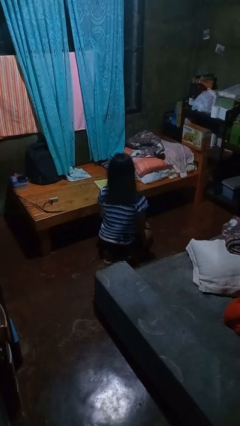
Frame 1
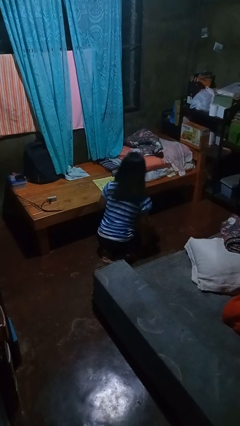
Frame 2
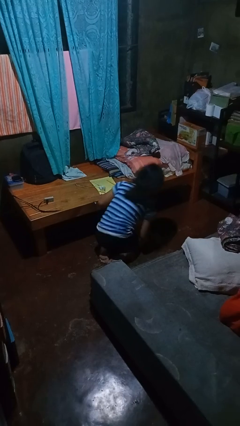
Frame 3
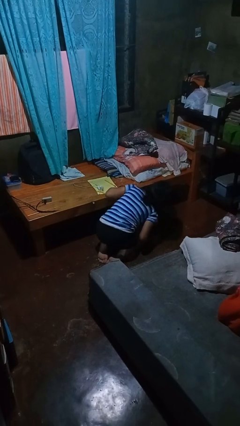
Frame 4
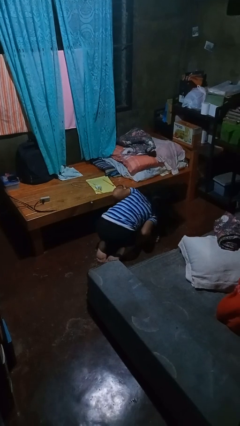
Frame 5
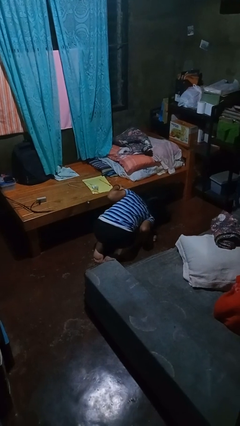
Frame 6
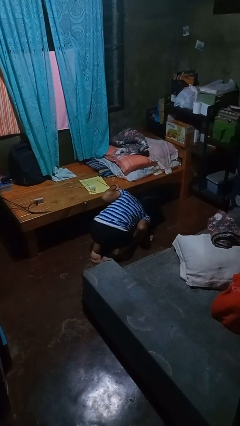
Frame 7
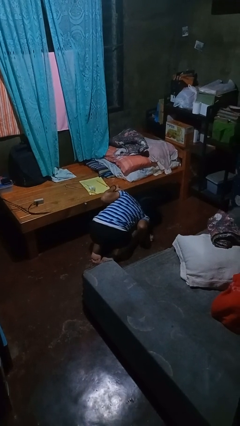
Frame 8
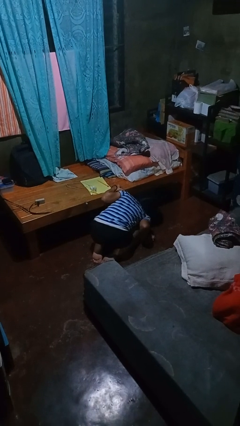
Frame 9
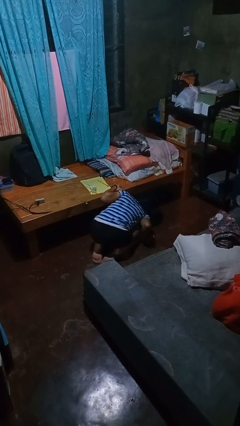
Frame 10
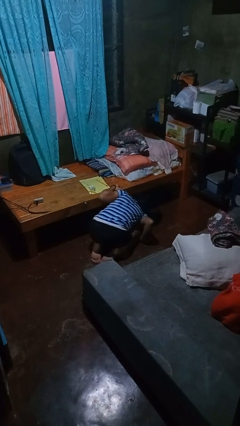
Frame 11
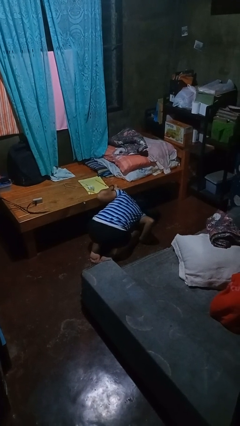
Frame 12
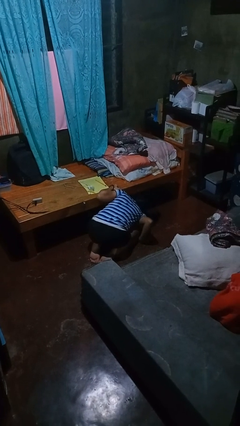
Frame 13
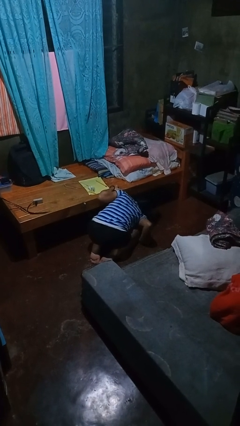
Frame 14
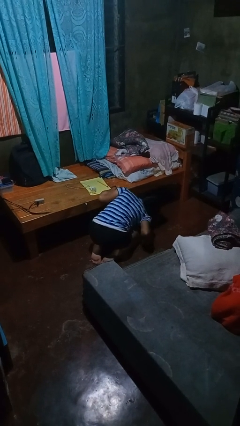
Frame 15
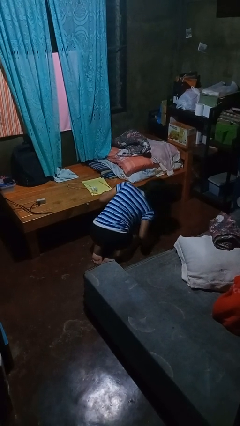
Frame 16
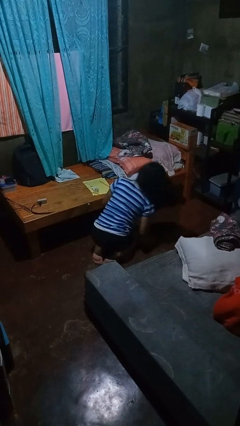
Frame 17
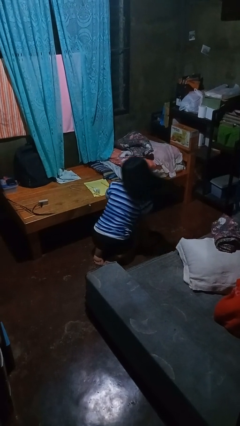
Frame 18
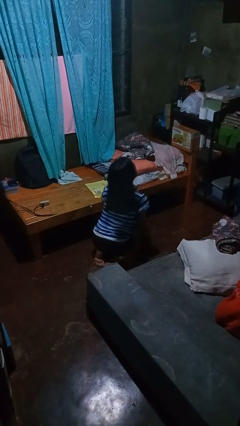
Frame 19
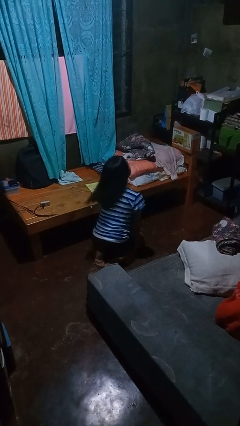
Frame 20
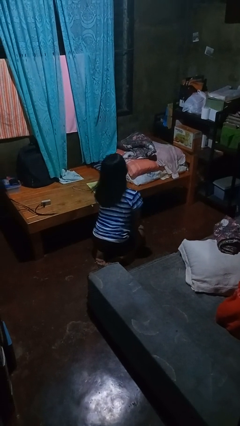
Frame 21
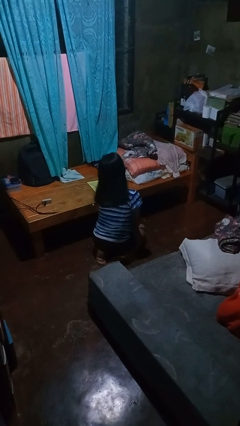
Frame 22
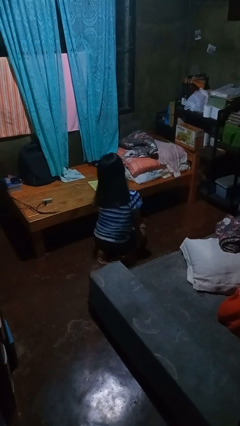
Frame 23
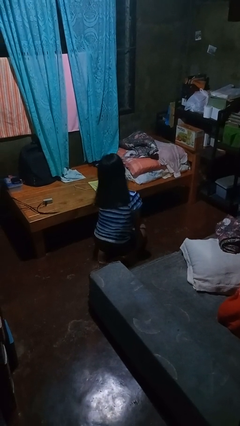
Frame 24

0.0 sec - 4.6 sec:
person searches under bed

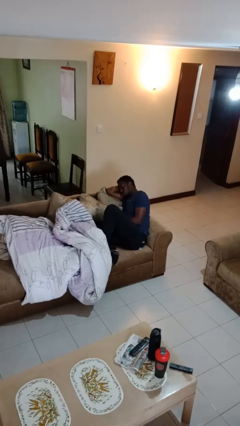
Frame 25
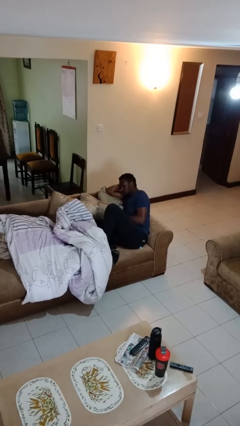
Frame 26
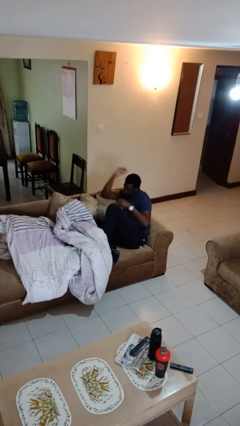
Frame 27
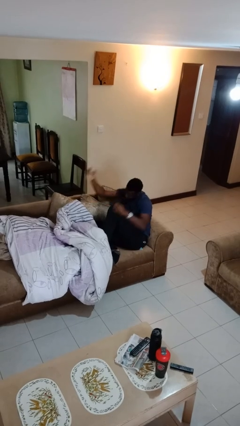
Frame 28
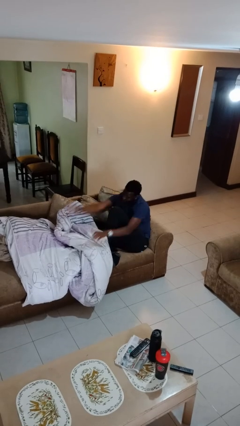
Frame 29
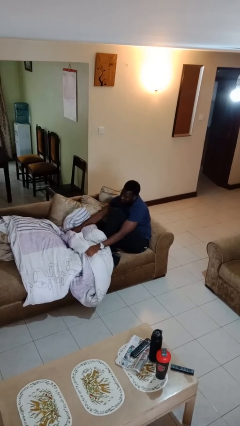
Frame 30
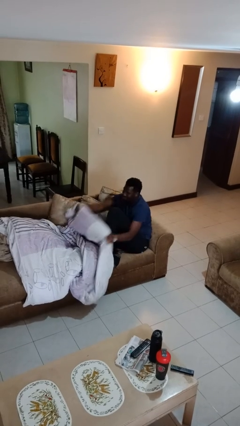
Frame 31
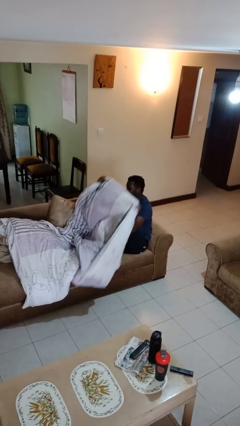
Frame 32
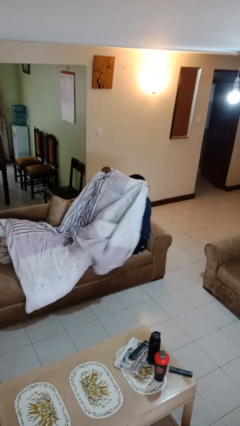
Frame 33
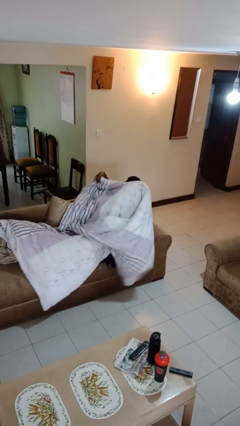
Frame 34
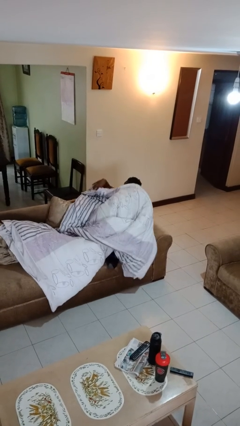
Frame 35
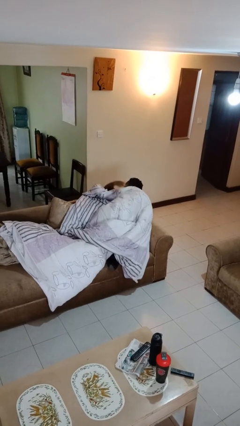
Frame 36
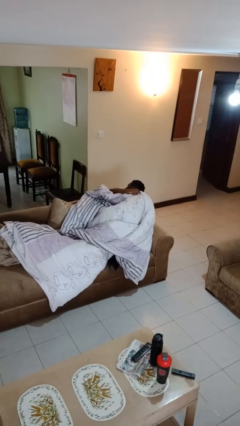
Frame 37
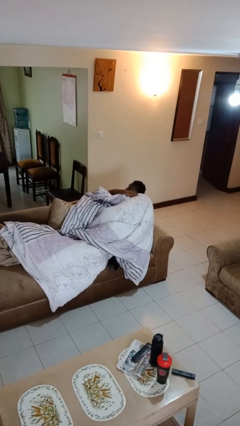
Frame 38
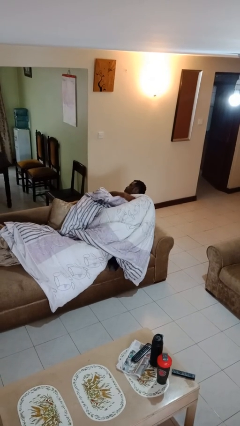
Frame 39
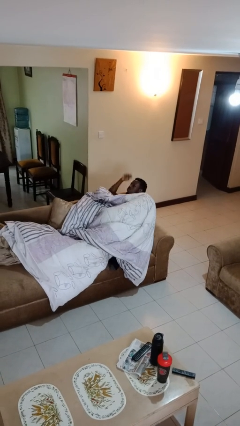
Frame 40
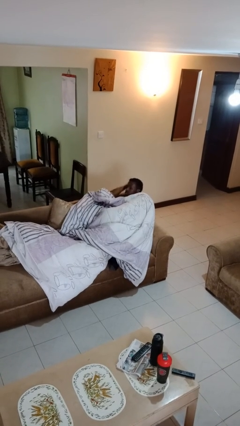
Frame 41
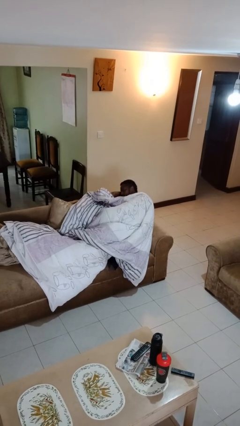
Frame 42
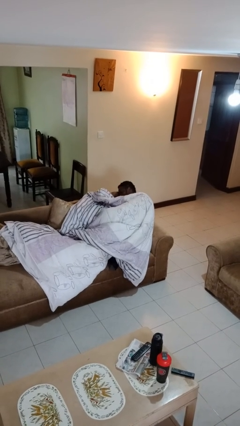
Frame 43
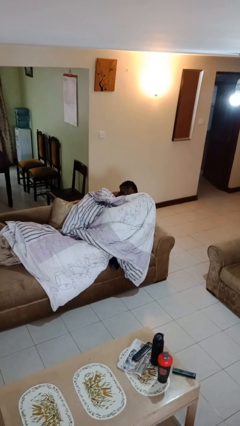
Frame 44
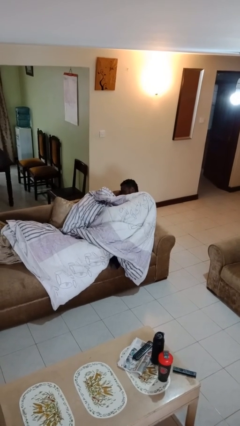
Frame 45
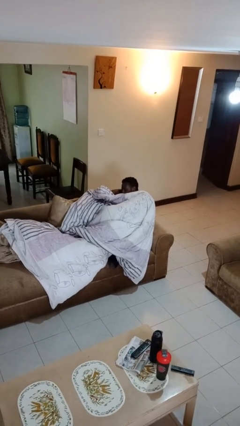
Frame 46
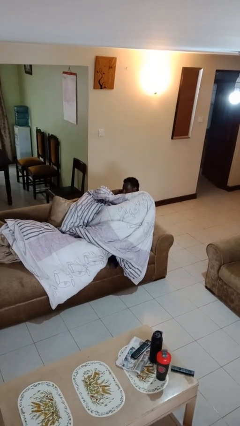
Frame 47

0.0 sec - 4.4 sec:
person covers with blanket

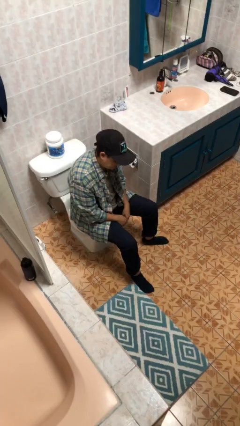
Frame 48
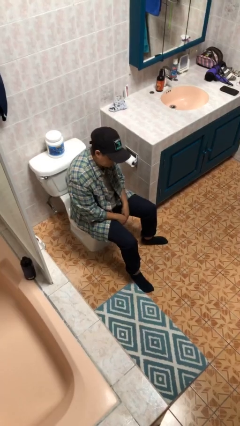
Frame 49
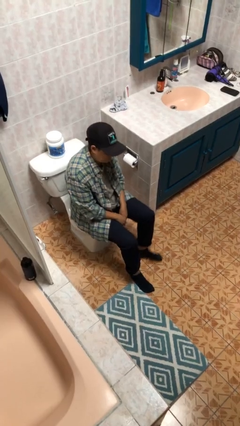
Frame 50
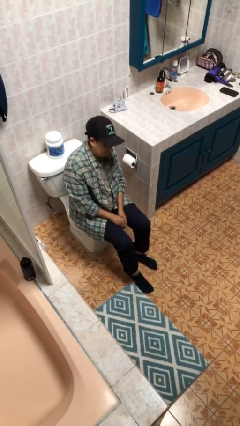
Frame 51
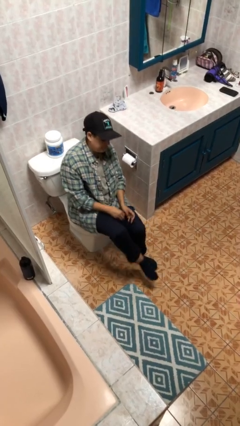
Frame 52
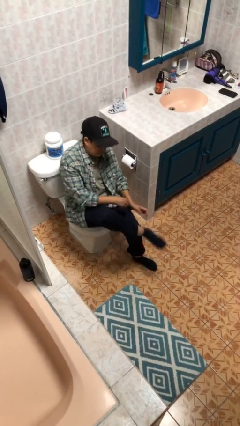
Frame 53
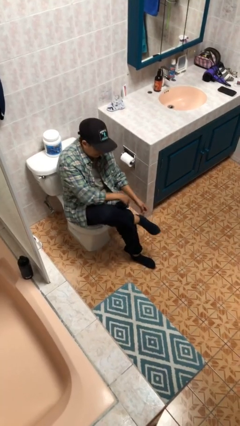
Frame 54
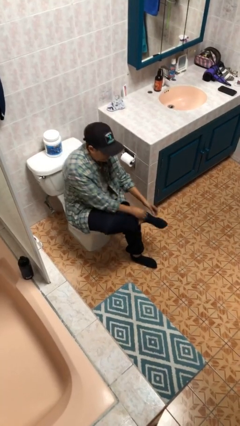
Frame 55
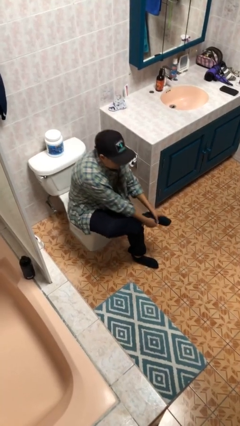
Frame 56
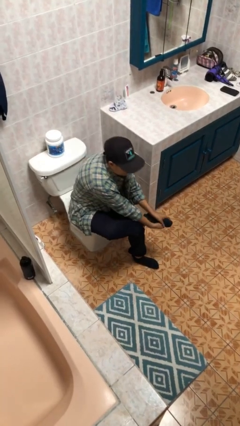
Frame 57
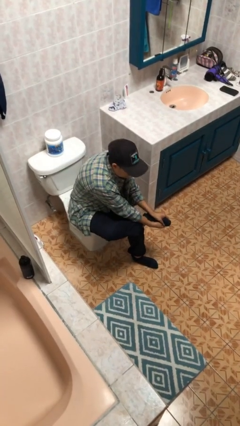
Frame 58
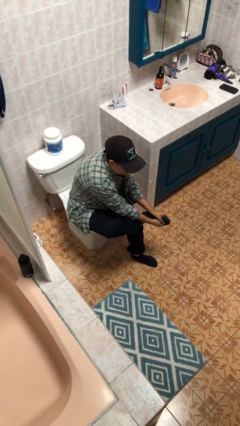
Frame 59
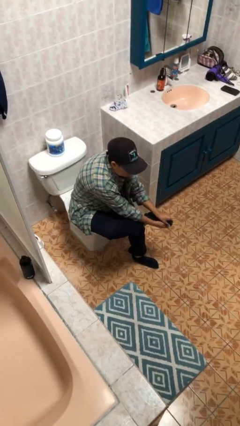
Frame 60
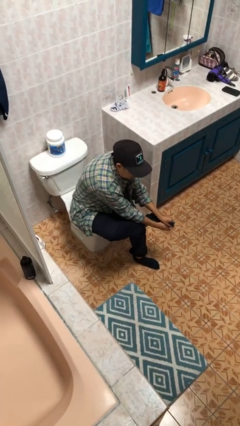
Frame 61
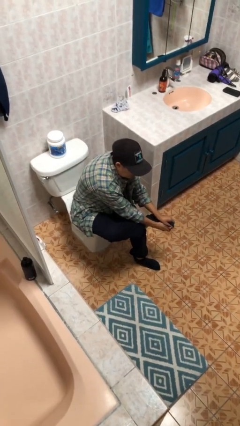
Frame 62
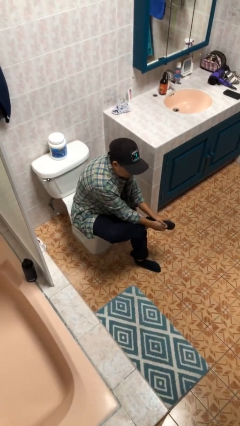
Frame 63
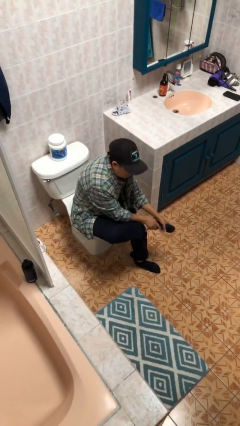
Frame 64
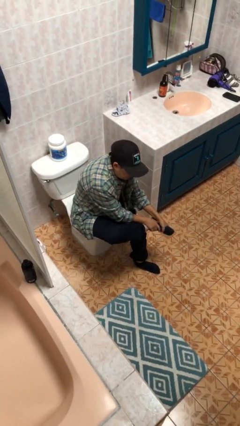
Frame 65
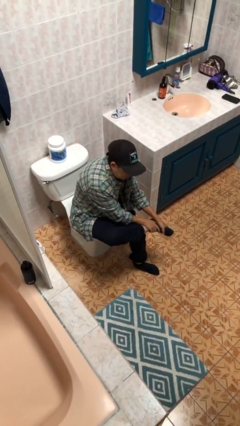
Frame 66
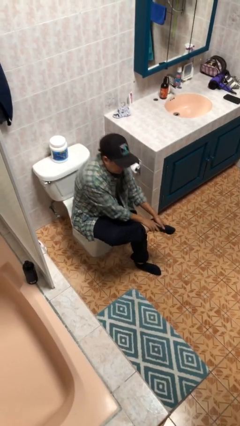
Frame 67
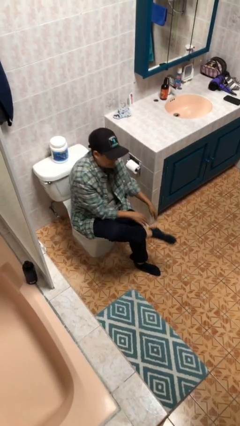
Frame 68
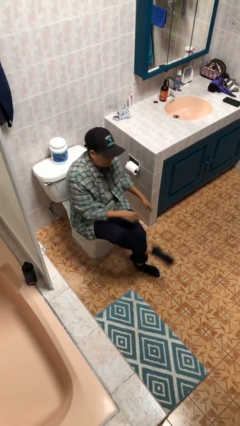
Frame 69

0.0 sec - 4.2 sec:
person rubs foot

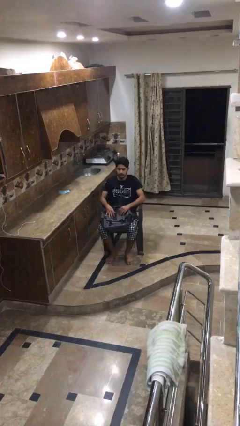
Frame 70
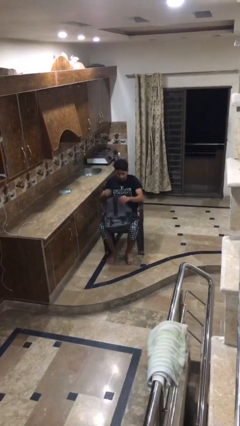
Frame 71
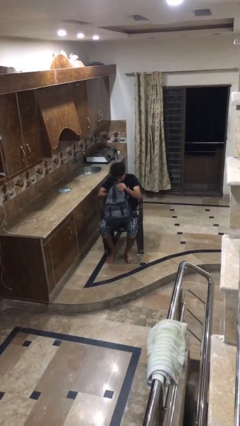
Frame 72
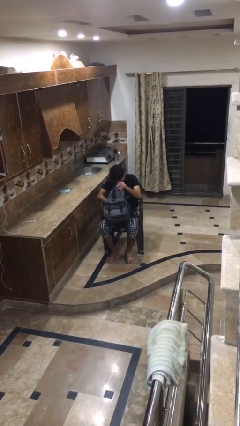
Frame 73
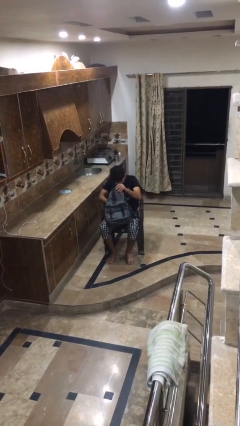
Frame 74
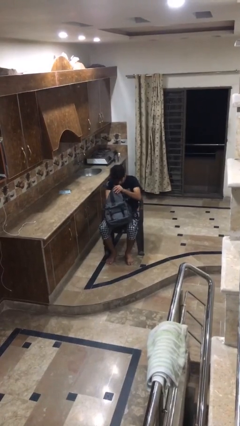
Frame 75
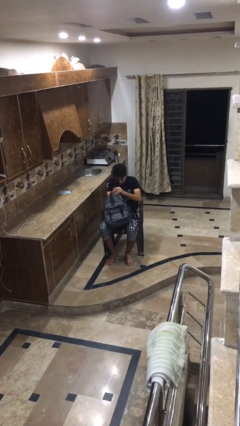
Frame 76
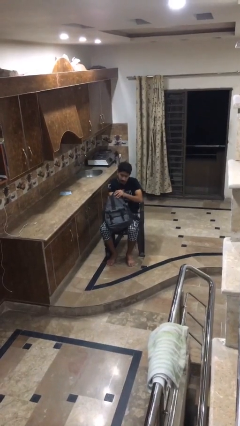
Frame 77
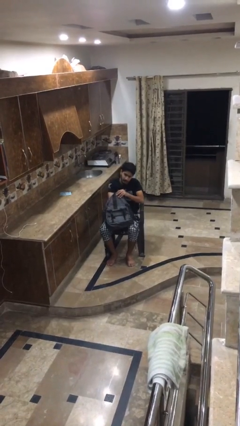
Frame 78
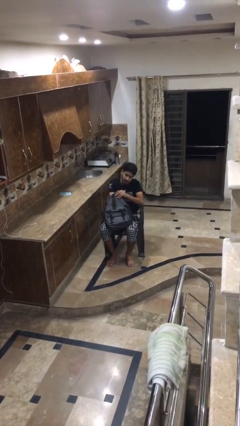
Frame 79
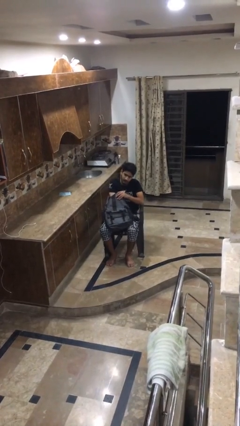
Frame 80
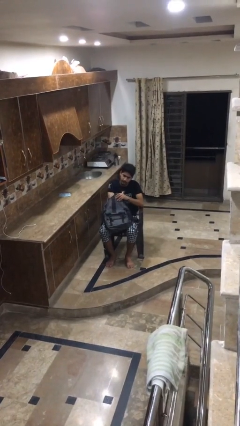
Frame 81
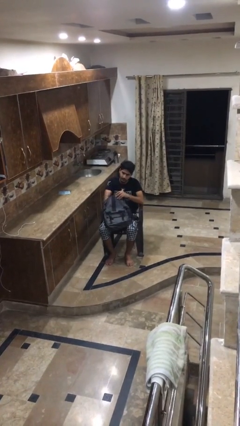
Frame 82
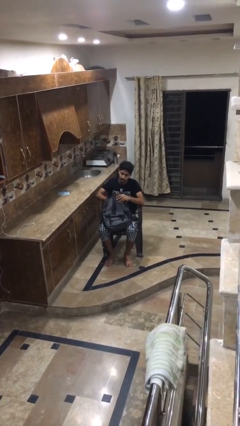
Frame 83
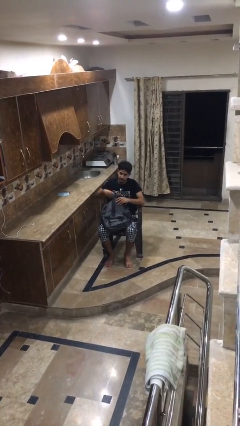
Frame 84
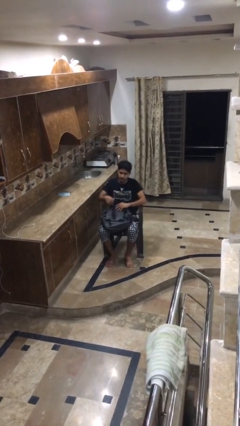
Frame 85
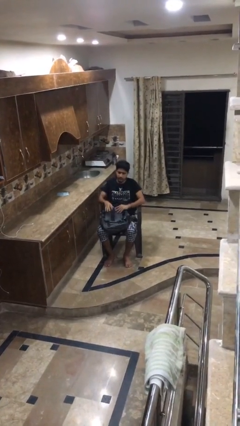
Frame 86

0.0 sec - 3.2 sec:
person searches in bag

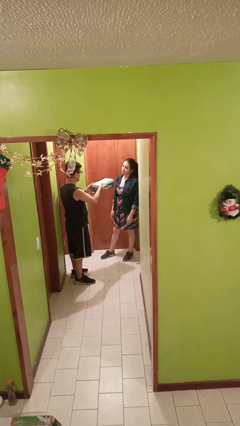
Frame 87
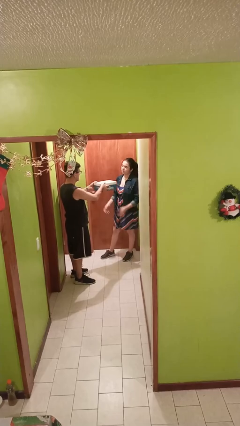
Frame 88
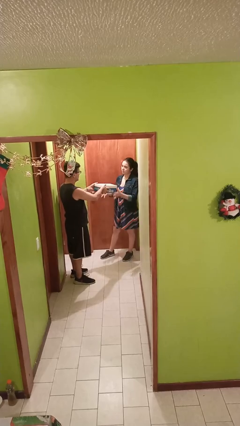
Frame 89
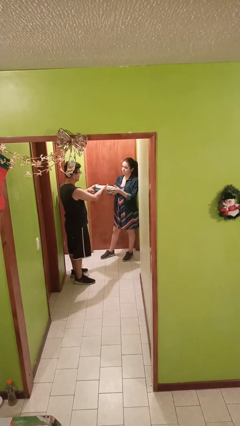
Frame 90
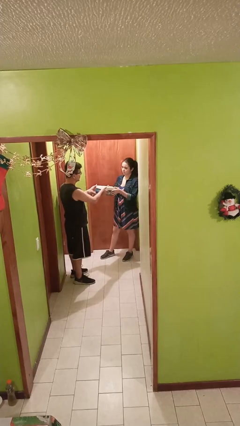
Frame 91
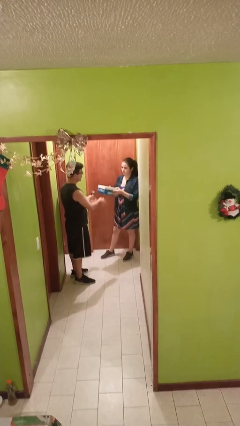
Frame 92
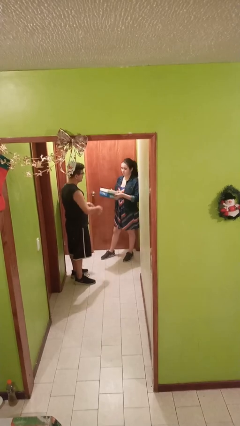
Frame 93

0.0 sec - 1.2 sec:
person transfers object to person

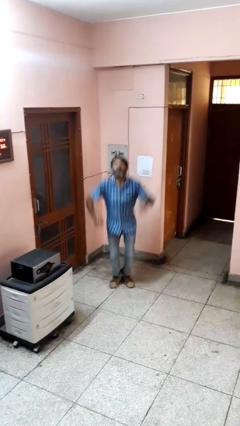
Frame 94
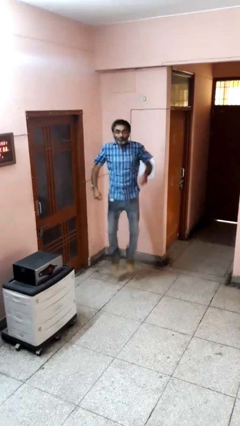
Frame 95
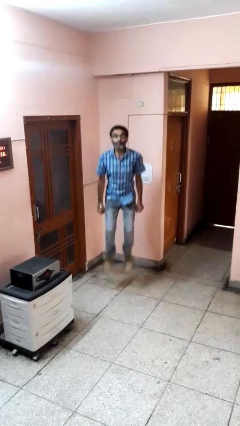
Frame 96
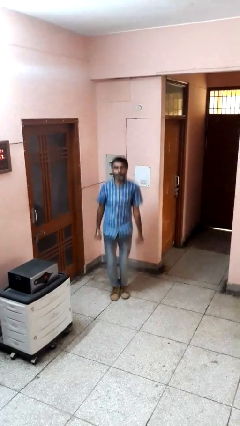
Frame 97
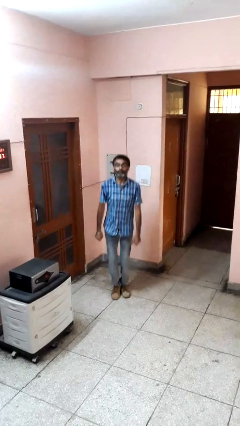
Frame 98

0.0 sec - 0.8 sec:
person jumps
